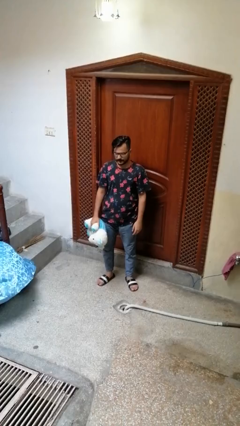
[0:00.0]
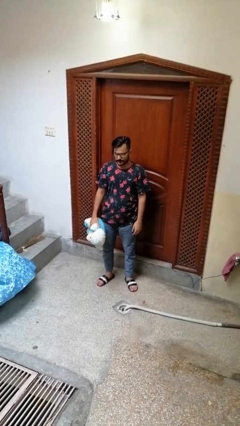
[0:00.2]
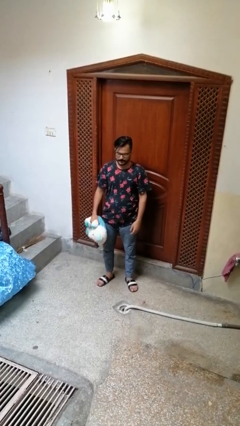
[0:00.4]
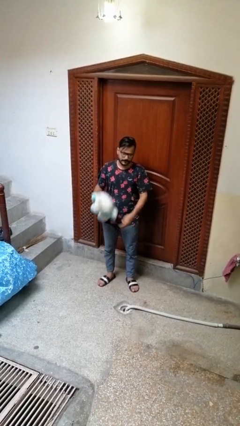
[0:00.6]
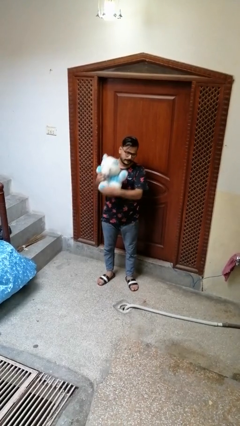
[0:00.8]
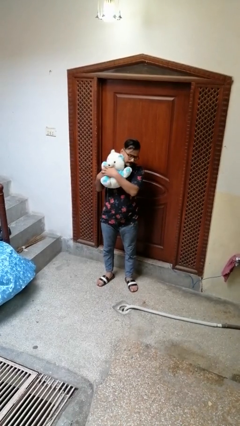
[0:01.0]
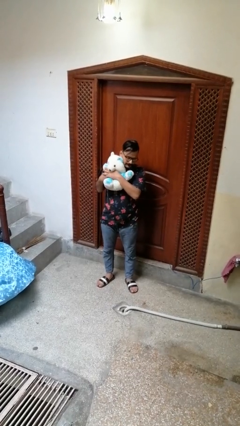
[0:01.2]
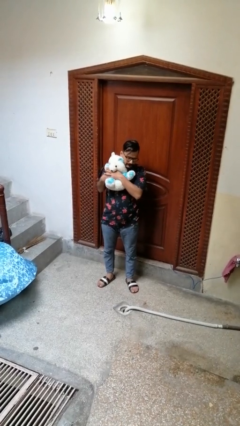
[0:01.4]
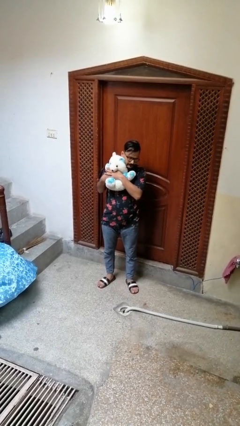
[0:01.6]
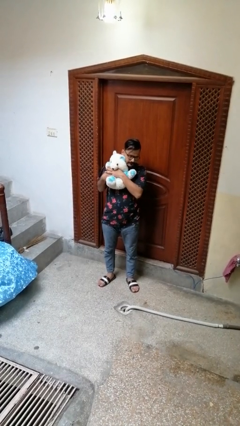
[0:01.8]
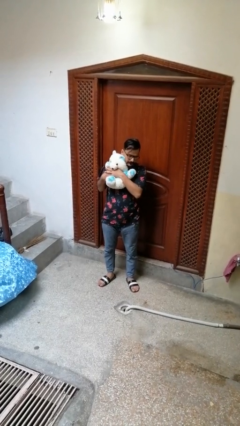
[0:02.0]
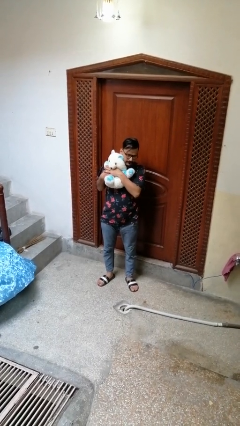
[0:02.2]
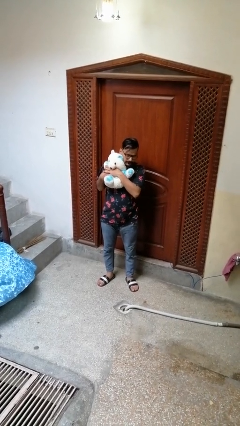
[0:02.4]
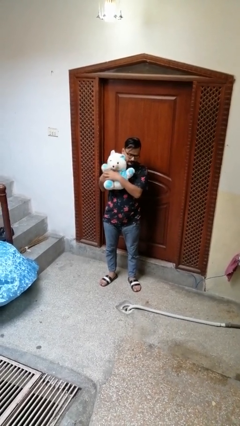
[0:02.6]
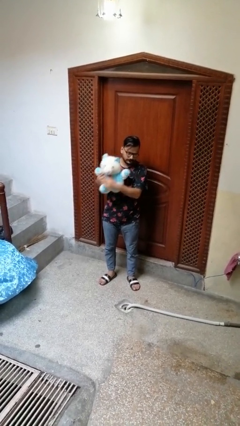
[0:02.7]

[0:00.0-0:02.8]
person hugs stuffed animal

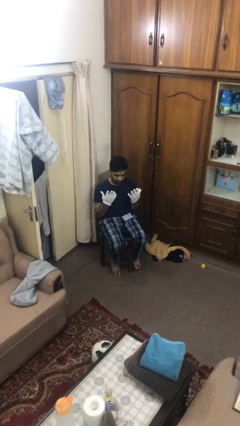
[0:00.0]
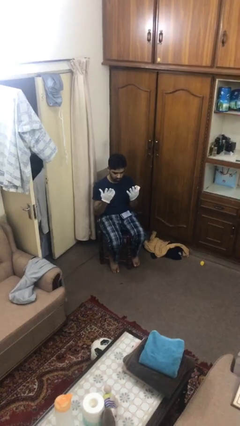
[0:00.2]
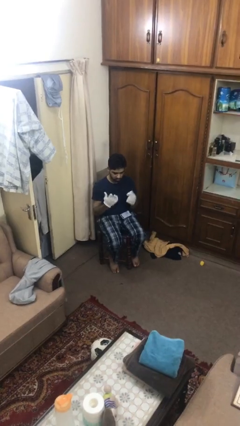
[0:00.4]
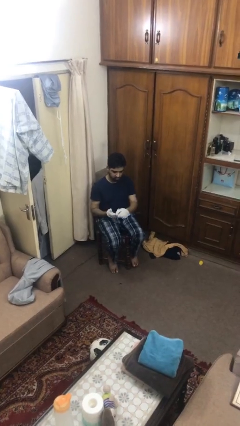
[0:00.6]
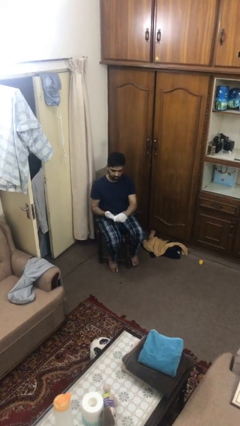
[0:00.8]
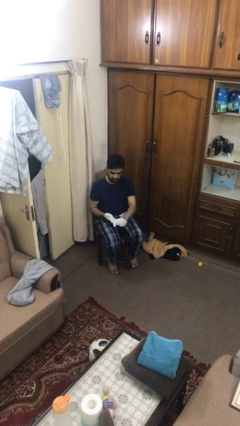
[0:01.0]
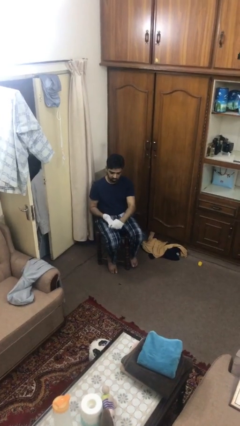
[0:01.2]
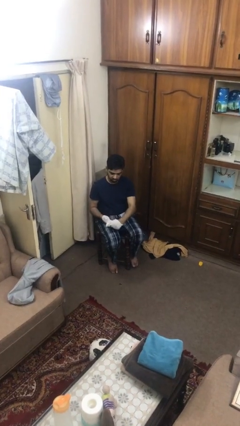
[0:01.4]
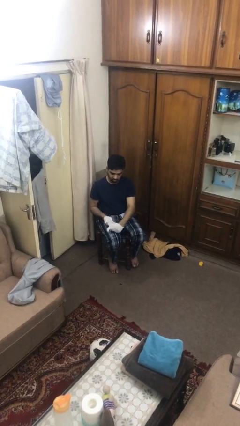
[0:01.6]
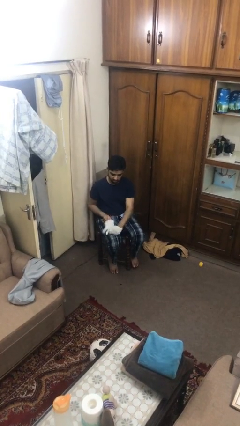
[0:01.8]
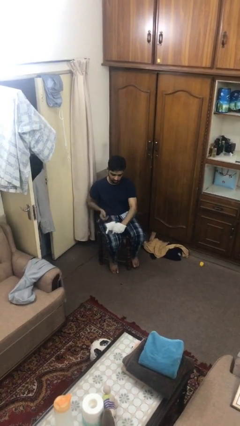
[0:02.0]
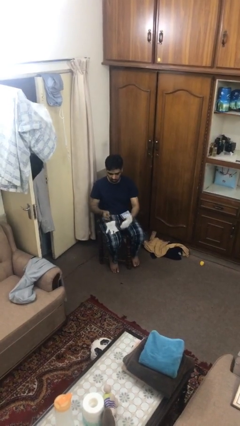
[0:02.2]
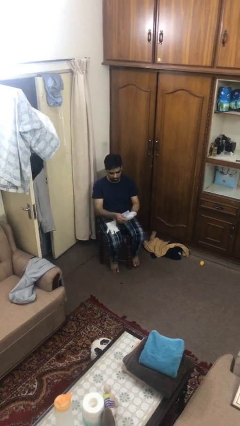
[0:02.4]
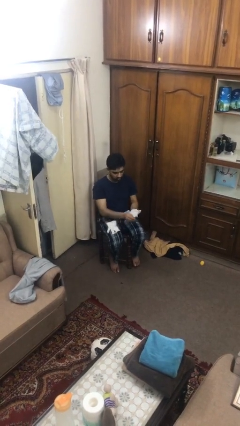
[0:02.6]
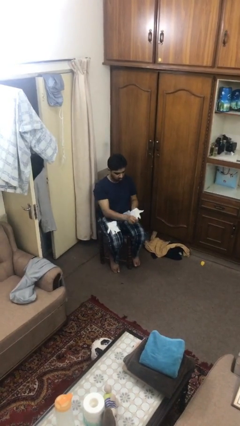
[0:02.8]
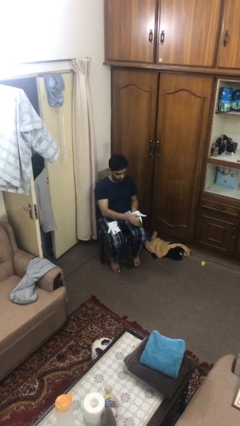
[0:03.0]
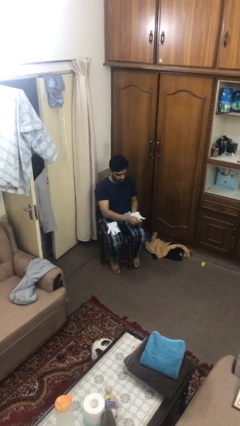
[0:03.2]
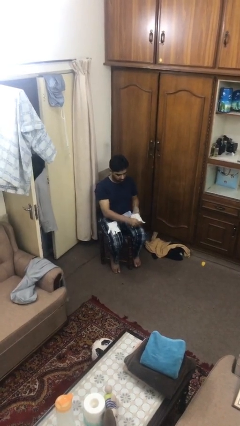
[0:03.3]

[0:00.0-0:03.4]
person takes off gloves

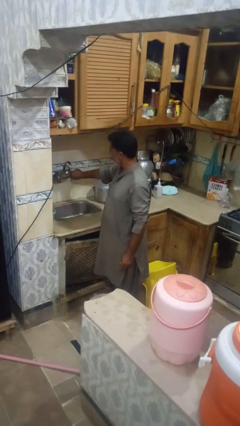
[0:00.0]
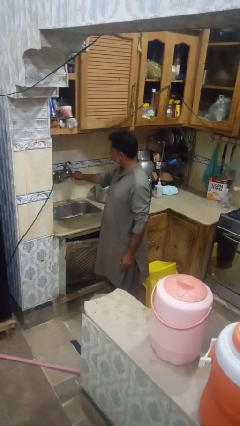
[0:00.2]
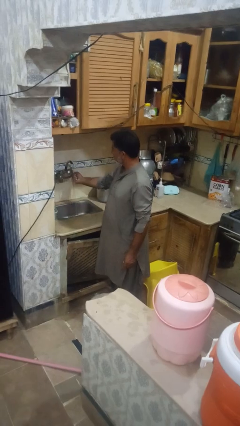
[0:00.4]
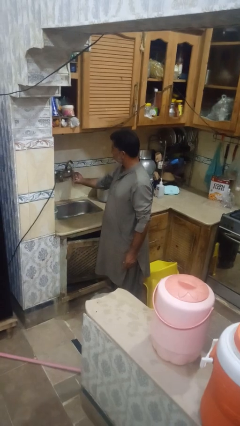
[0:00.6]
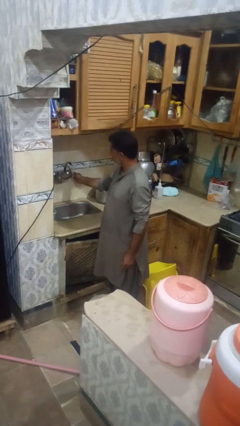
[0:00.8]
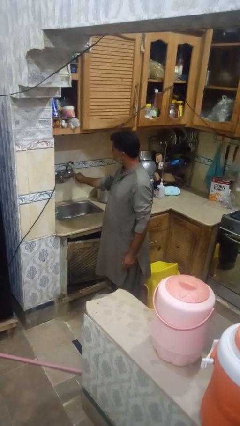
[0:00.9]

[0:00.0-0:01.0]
person turns off faucet

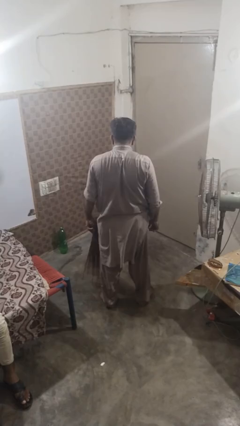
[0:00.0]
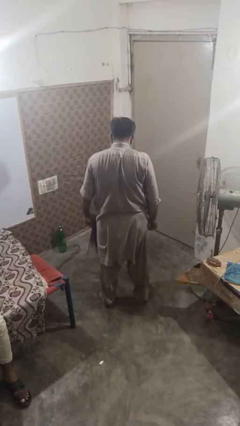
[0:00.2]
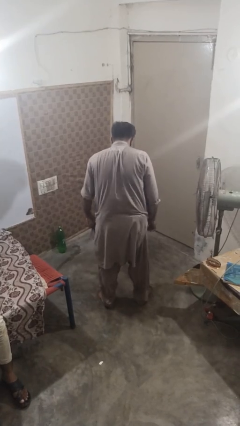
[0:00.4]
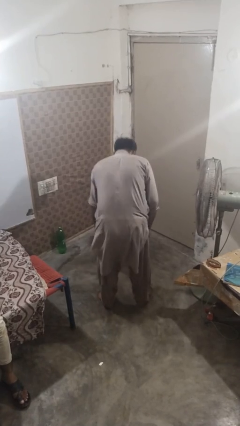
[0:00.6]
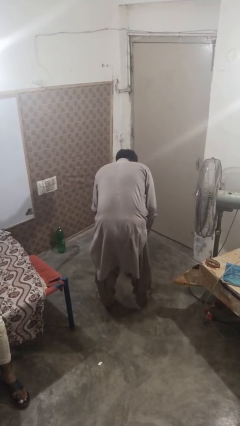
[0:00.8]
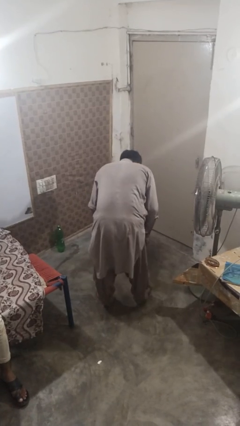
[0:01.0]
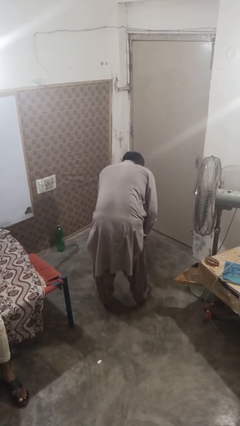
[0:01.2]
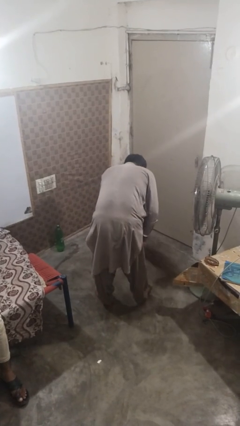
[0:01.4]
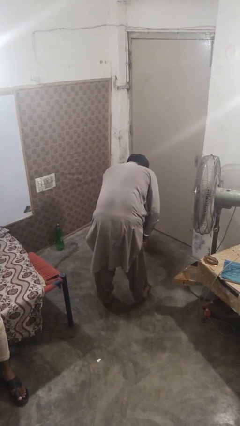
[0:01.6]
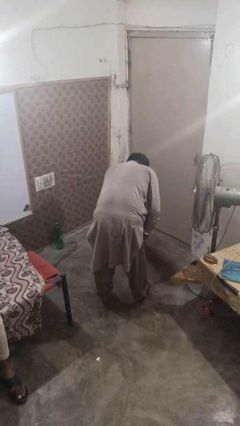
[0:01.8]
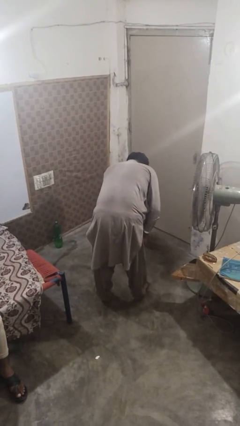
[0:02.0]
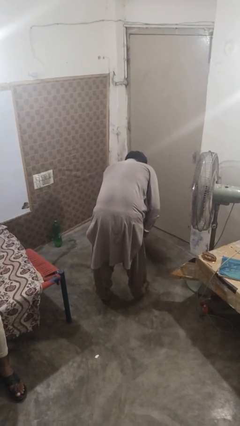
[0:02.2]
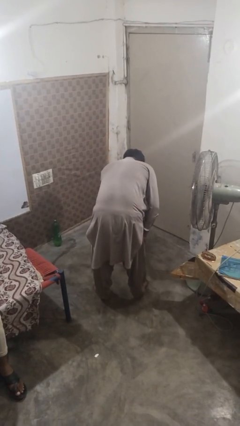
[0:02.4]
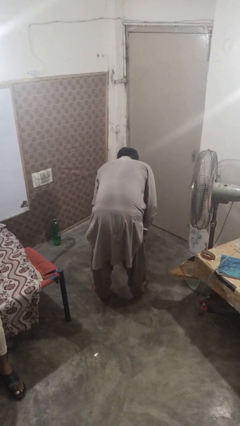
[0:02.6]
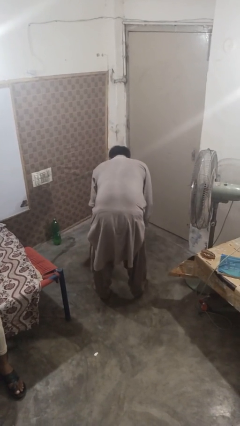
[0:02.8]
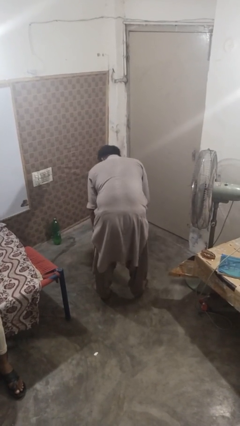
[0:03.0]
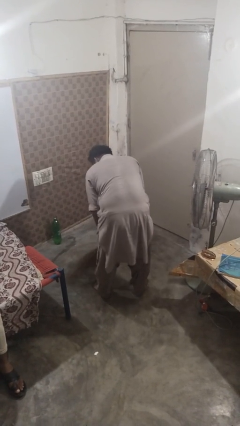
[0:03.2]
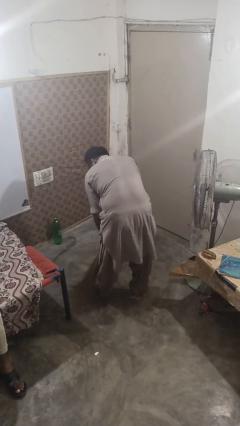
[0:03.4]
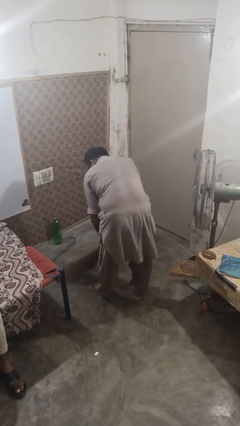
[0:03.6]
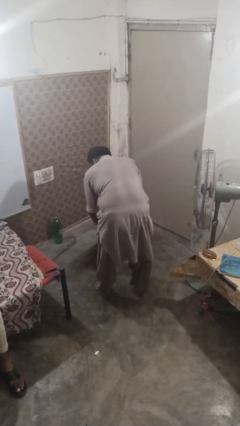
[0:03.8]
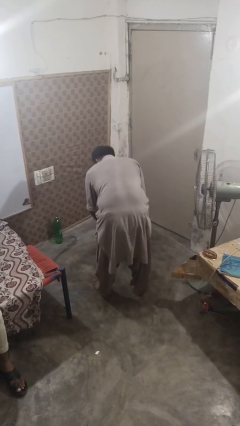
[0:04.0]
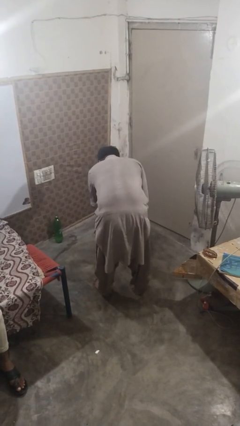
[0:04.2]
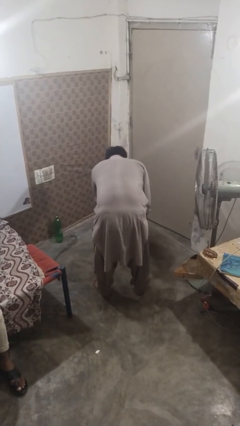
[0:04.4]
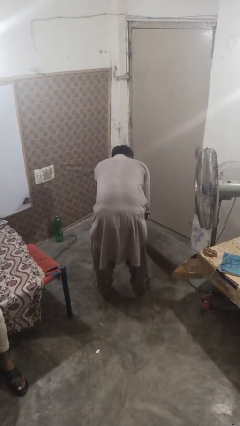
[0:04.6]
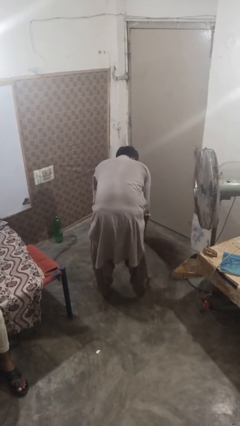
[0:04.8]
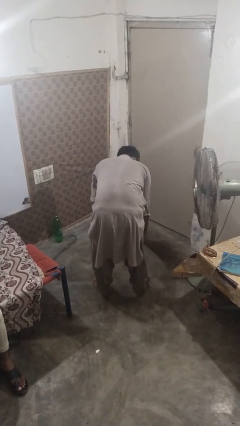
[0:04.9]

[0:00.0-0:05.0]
person sweeps floor

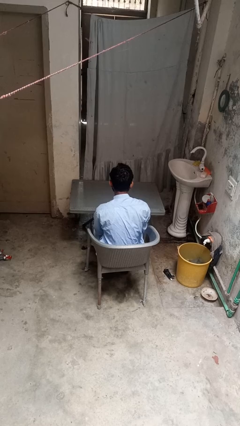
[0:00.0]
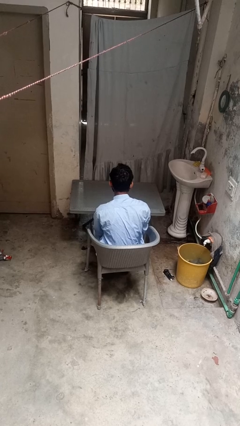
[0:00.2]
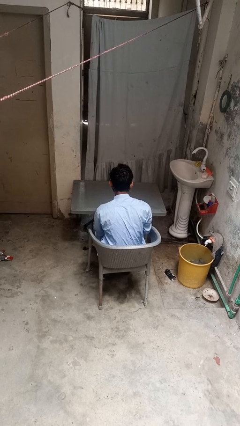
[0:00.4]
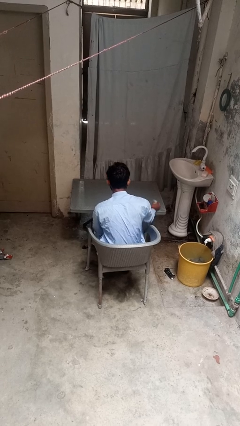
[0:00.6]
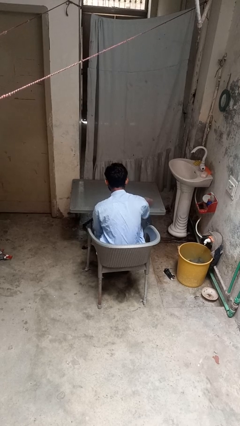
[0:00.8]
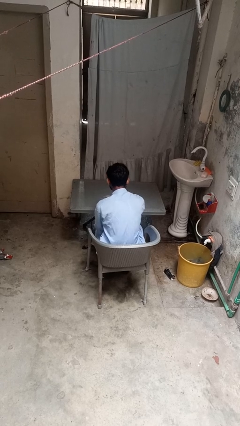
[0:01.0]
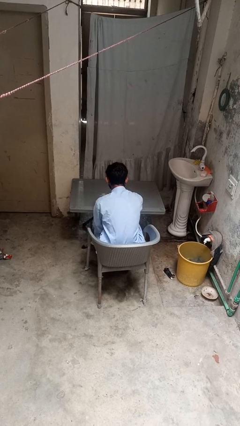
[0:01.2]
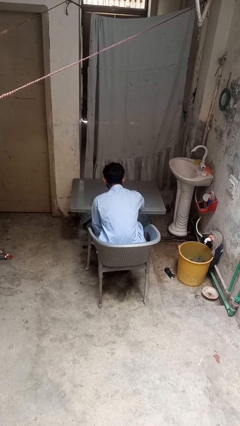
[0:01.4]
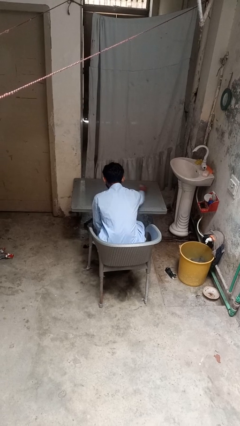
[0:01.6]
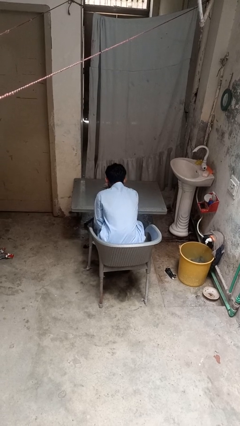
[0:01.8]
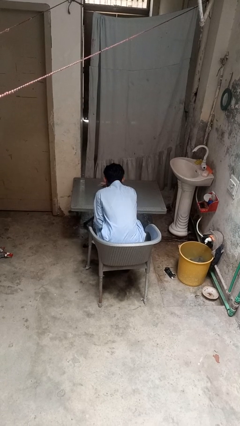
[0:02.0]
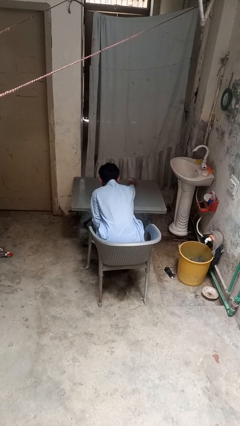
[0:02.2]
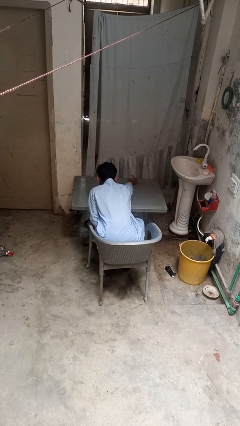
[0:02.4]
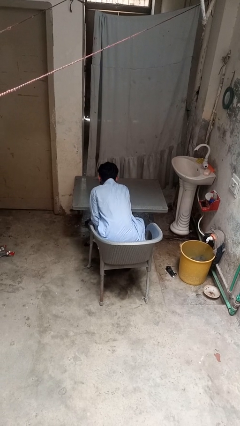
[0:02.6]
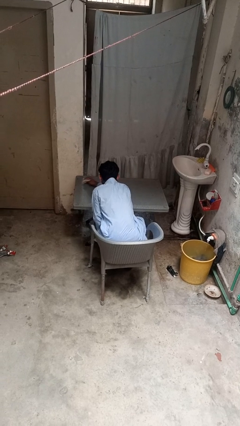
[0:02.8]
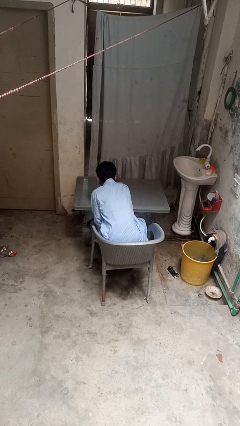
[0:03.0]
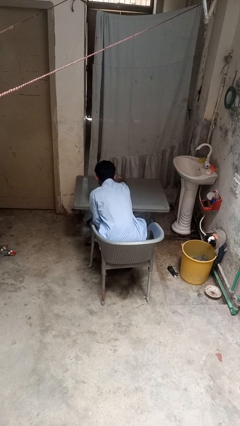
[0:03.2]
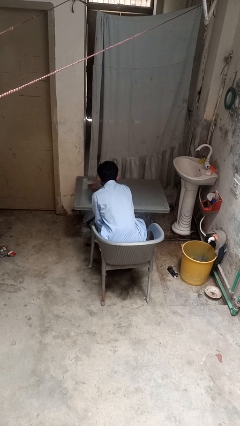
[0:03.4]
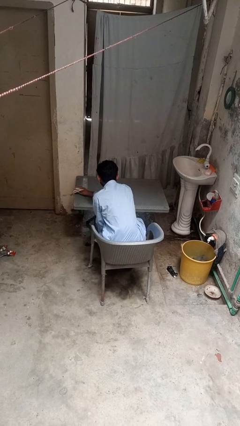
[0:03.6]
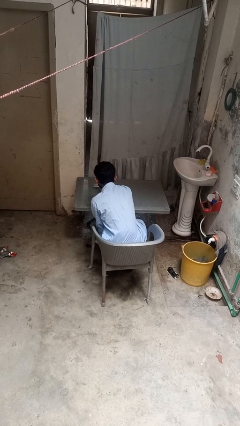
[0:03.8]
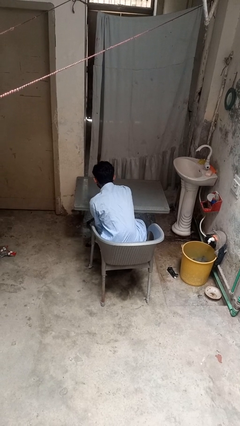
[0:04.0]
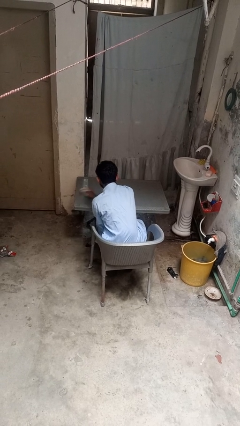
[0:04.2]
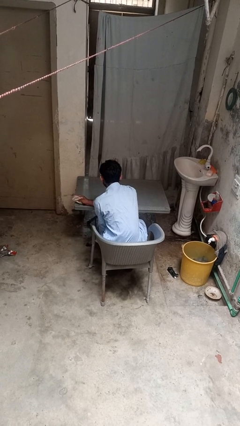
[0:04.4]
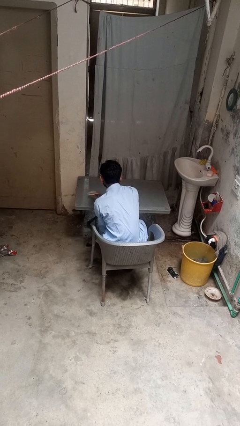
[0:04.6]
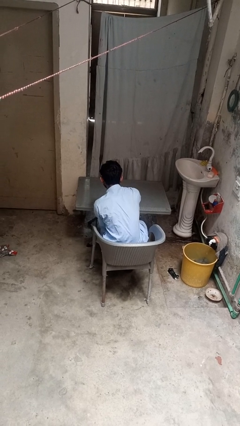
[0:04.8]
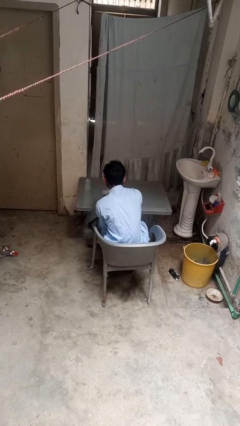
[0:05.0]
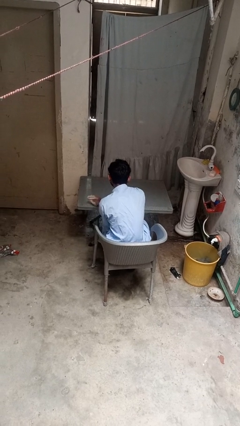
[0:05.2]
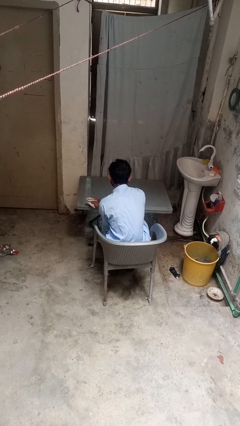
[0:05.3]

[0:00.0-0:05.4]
person cleans table with rag

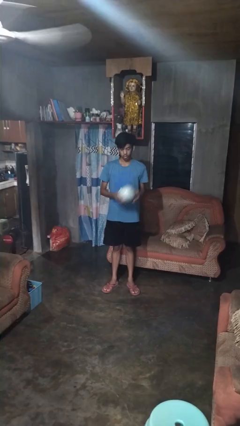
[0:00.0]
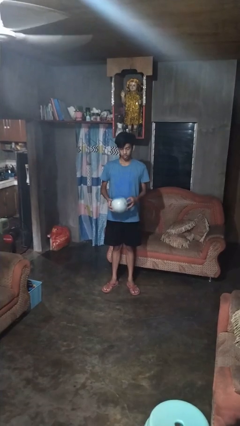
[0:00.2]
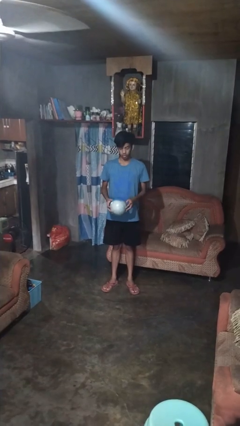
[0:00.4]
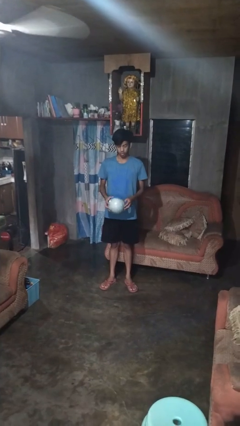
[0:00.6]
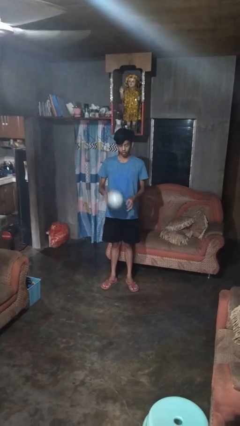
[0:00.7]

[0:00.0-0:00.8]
person bounces ball on floor
